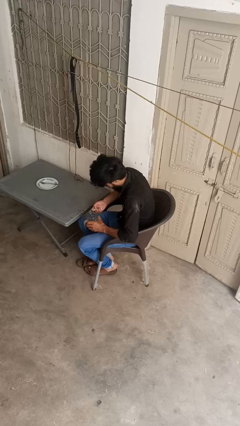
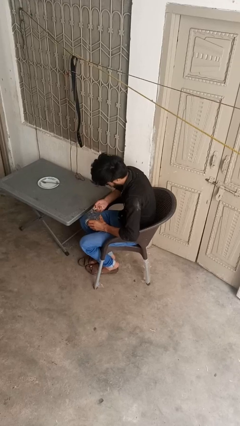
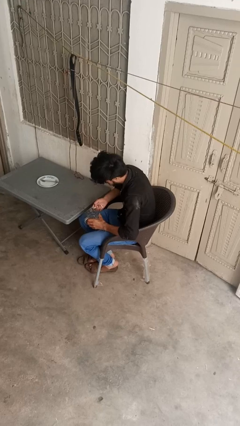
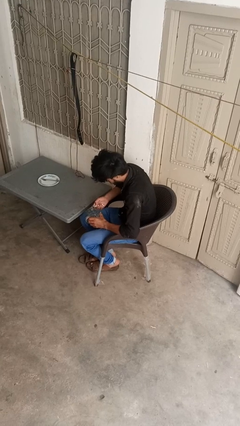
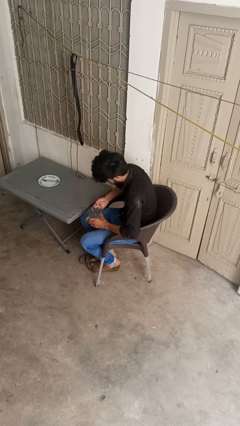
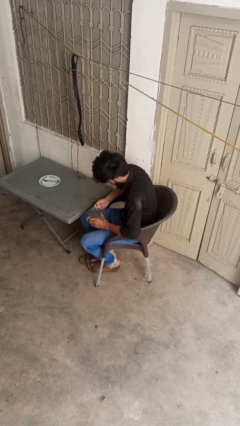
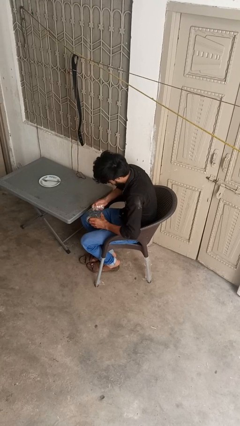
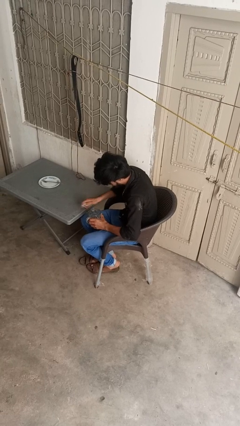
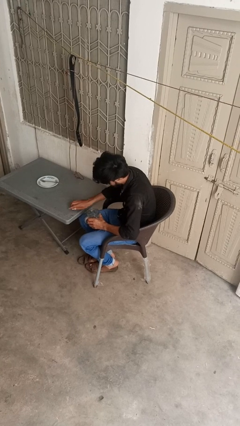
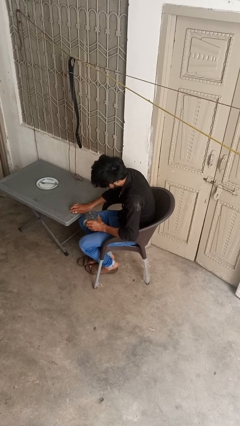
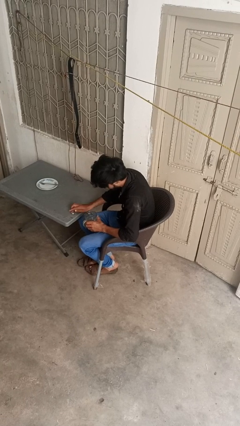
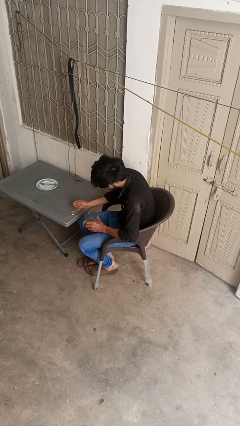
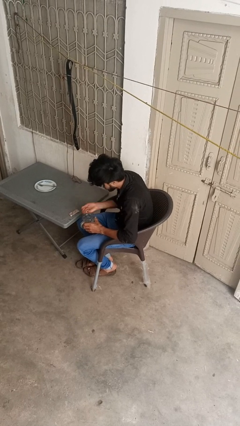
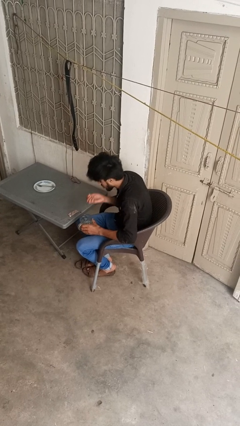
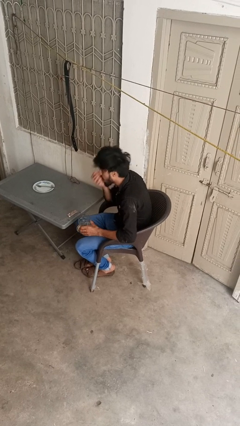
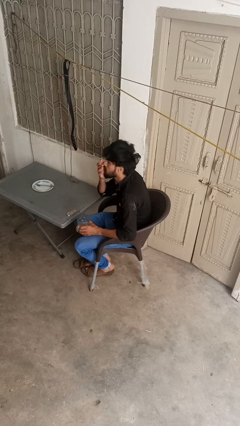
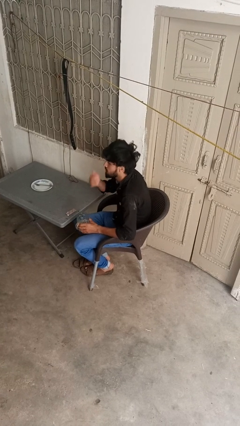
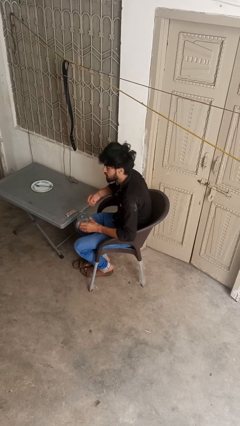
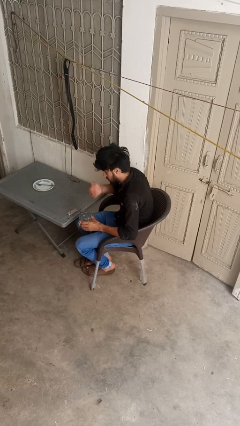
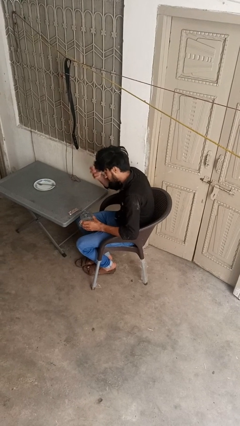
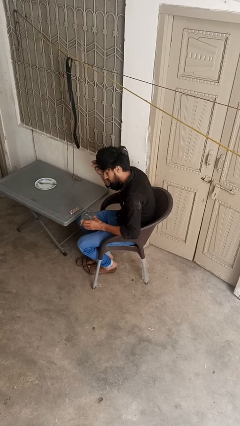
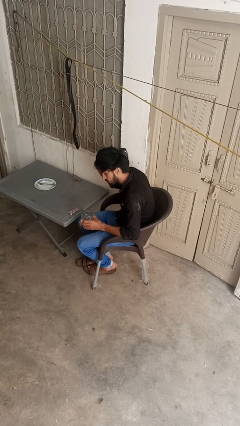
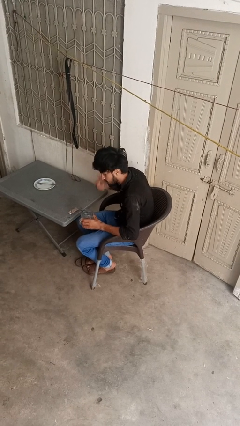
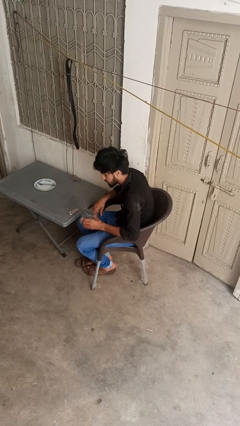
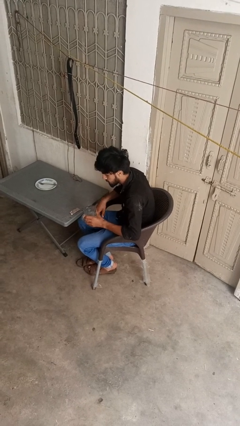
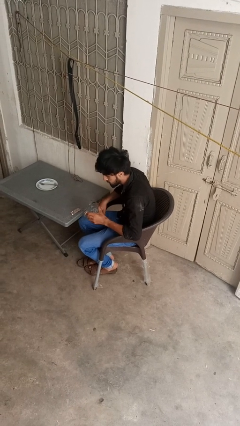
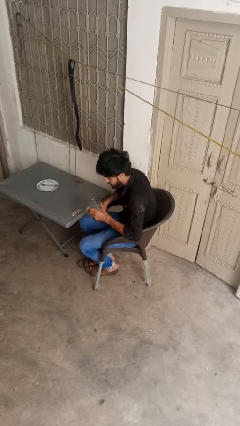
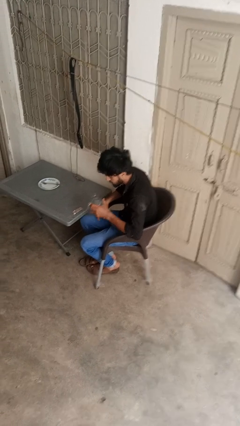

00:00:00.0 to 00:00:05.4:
person takes medicine pills

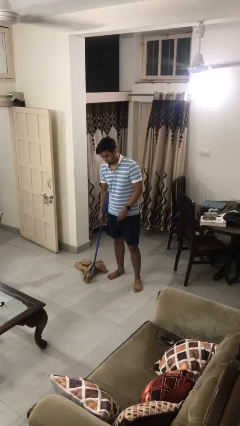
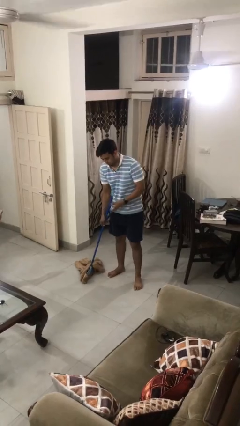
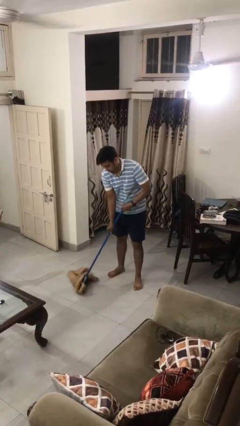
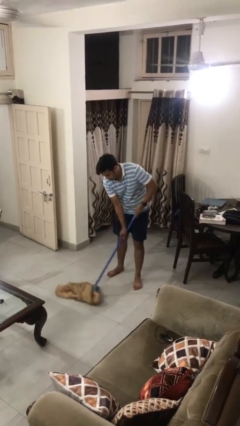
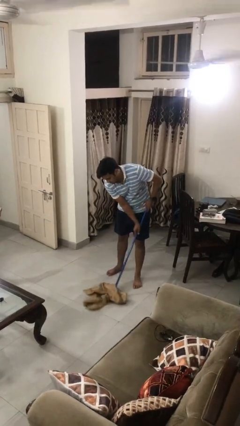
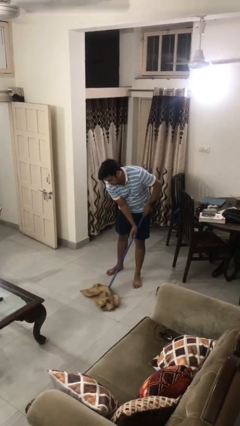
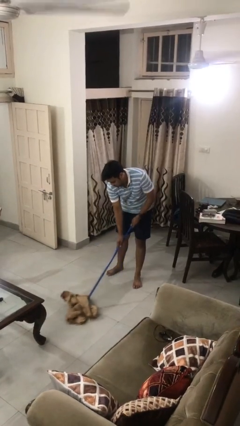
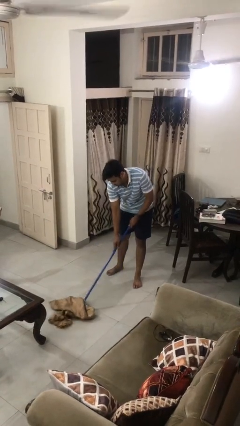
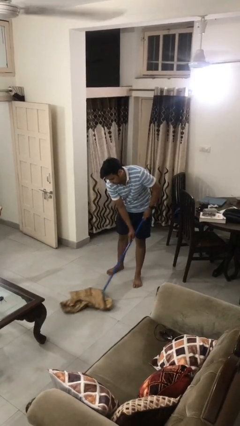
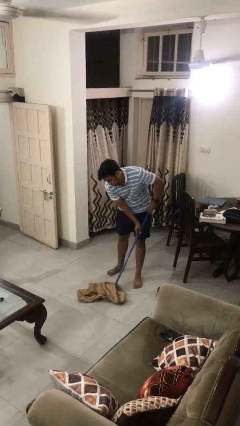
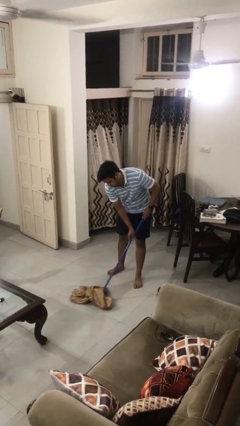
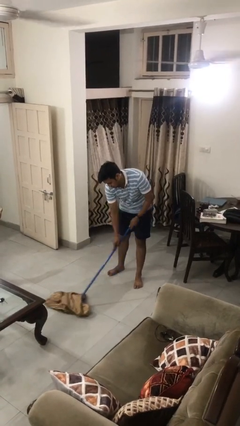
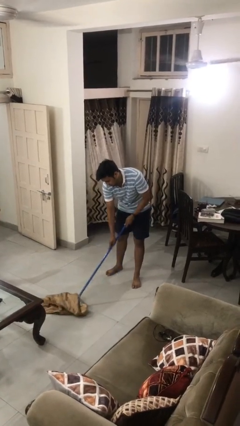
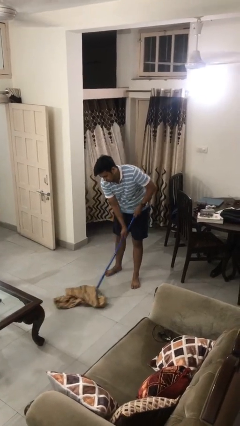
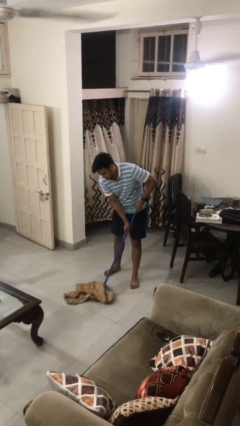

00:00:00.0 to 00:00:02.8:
person mops

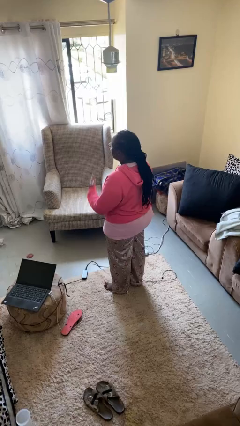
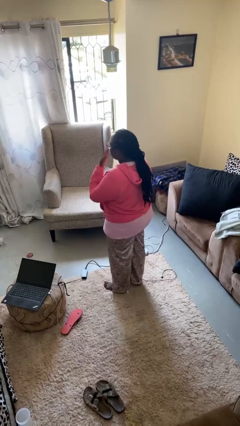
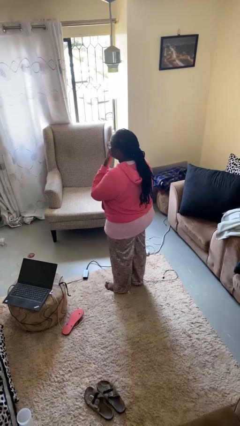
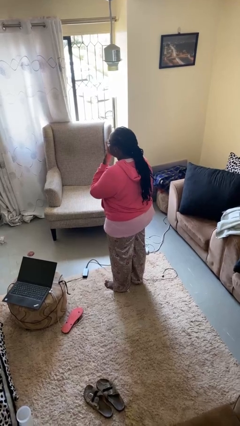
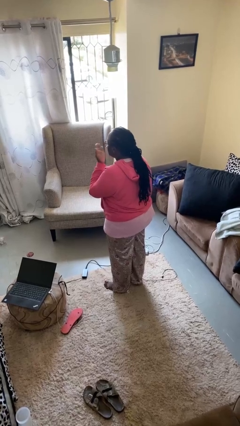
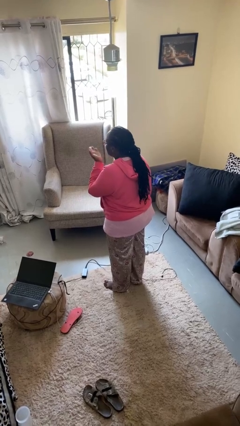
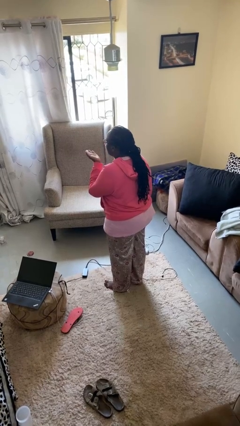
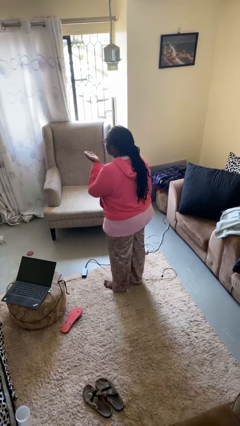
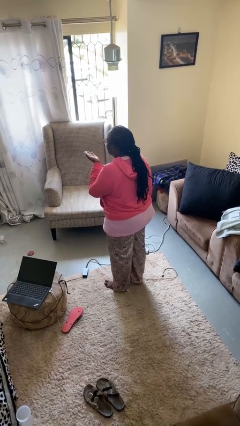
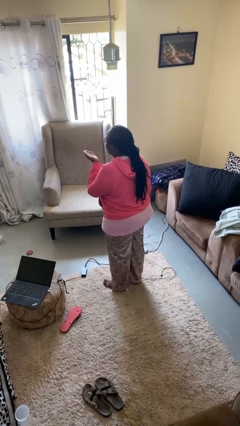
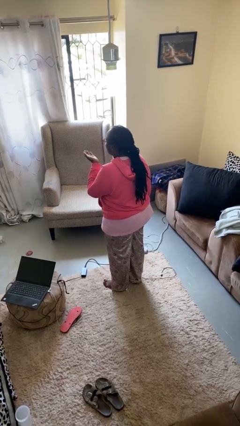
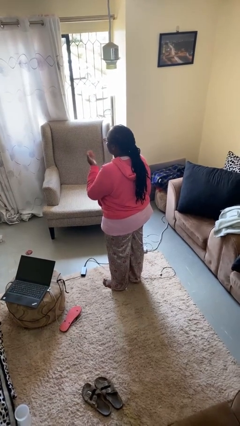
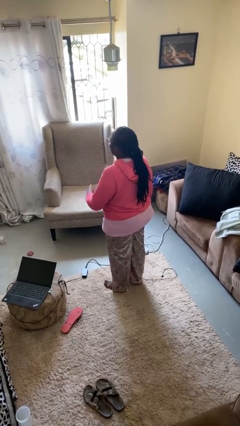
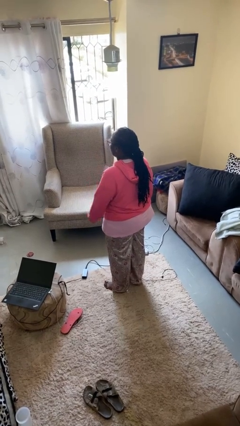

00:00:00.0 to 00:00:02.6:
person gestures blow kiss

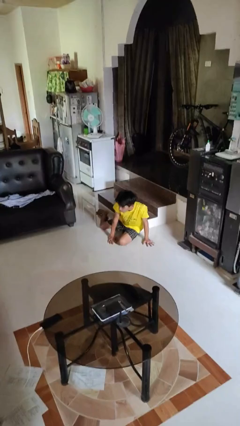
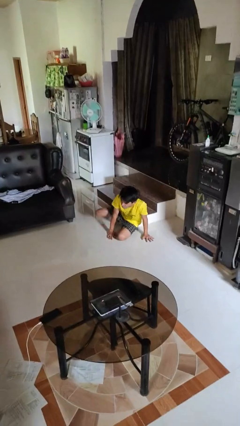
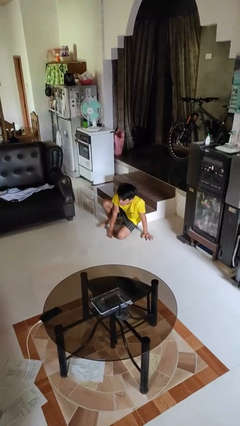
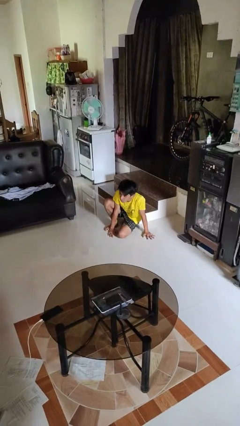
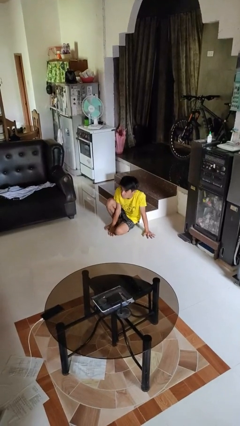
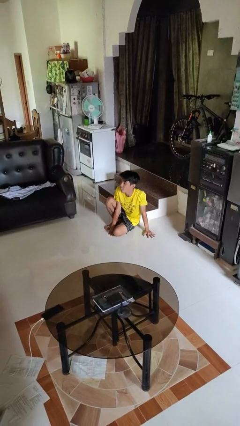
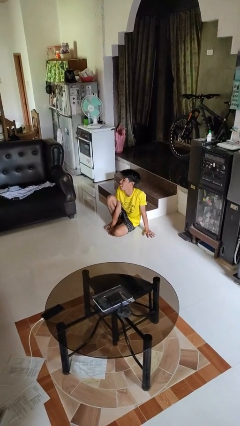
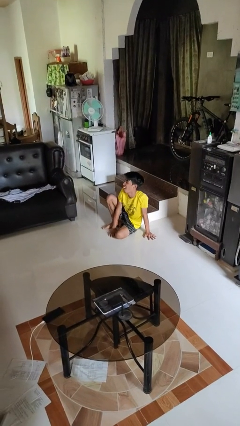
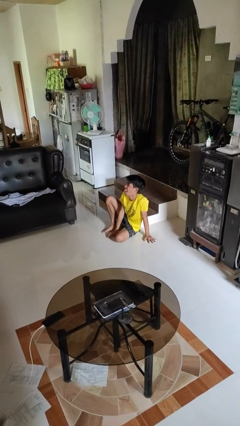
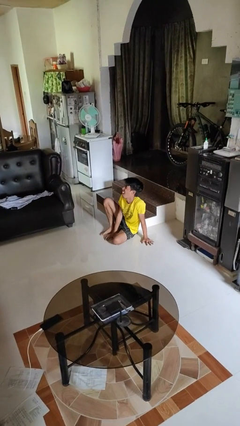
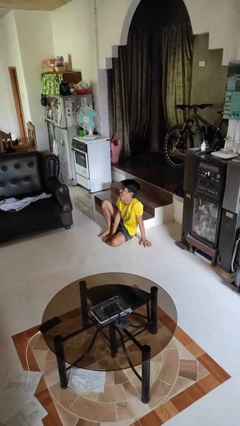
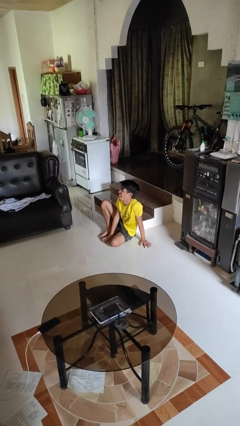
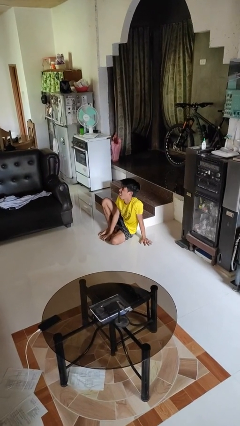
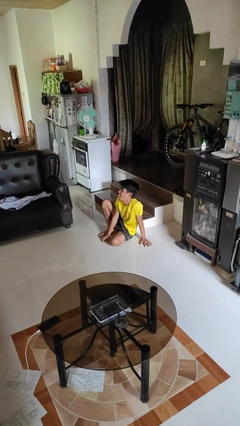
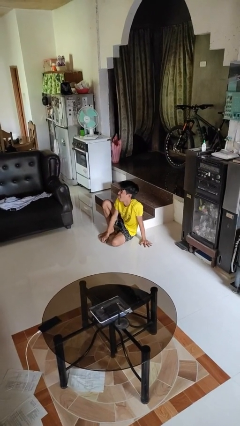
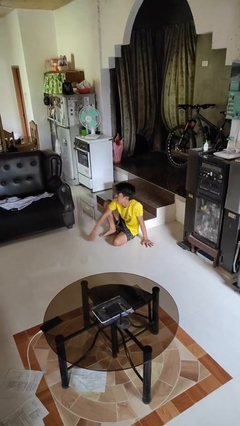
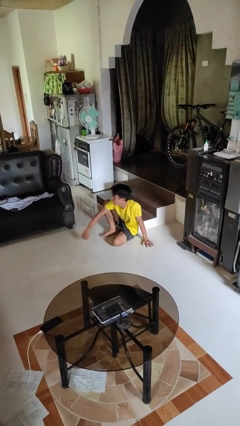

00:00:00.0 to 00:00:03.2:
person lies down on floor

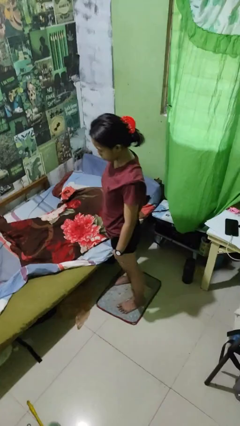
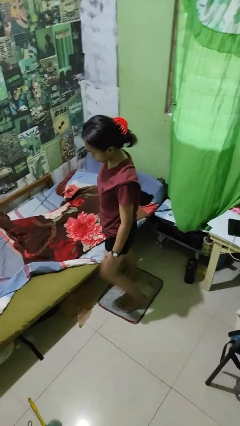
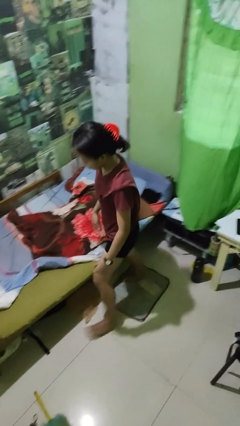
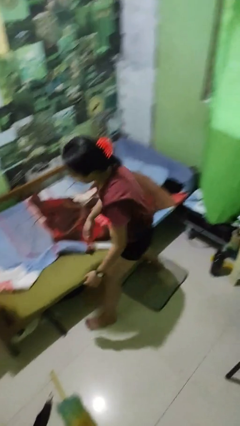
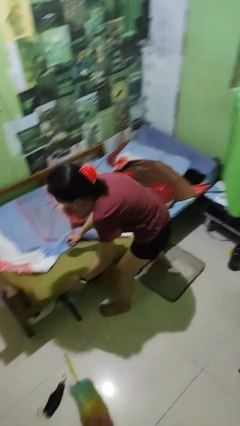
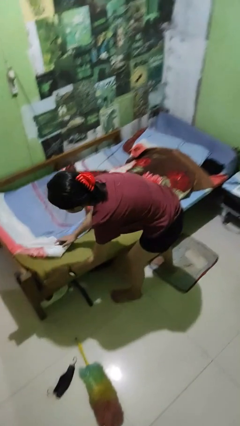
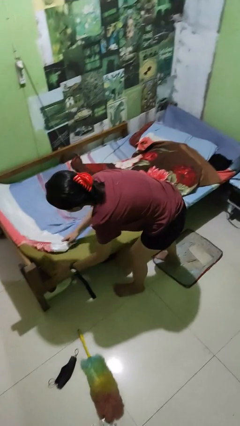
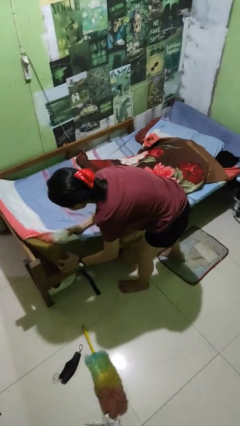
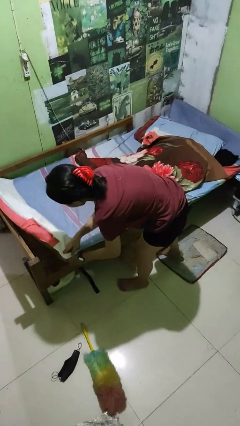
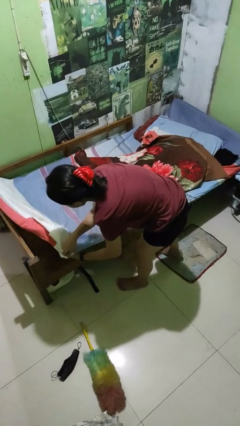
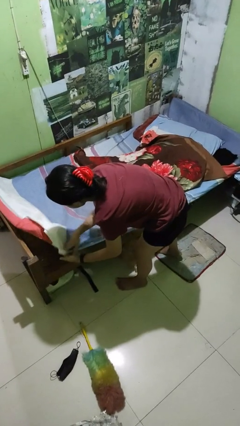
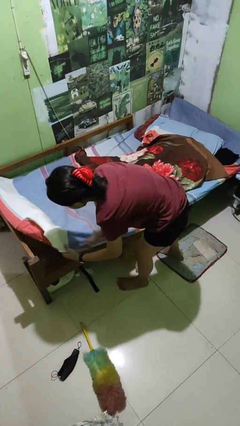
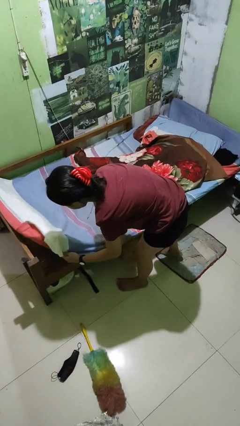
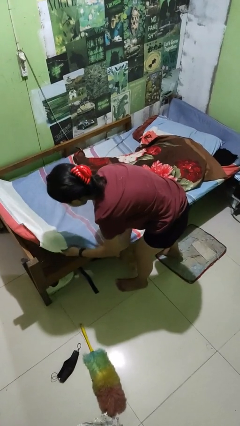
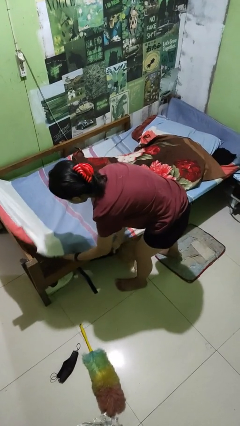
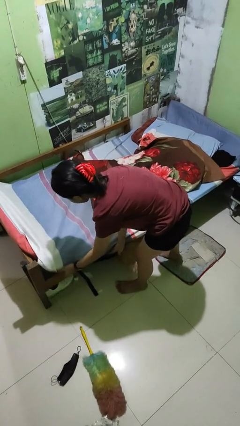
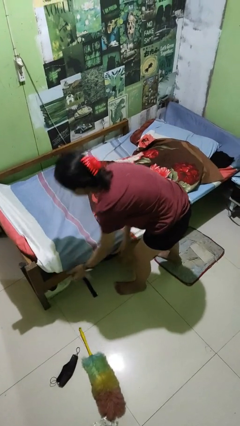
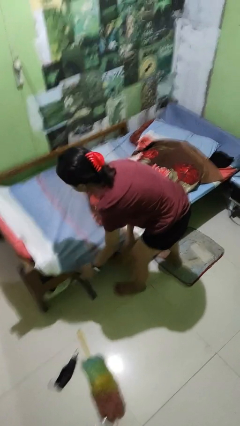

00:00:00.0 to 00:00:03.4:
person makes bed

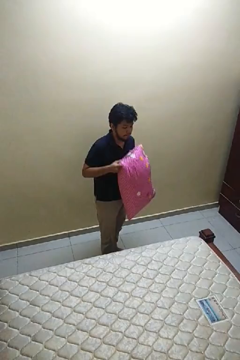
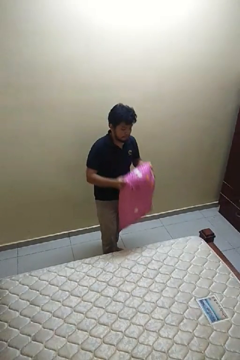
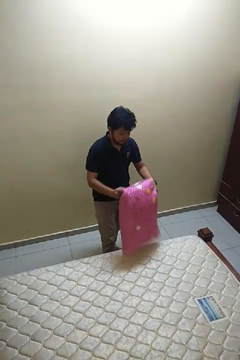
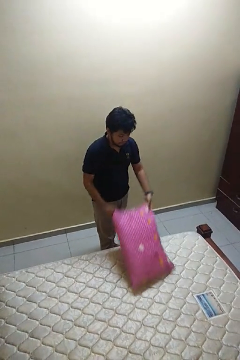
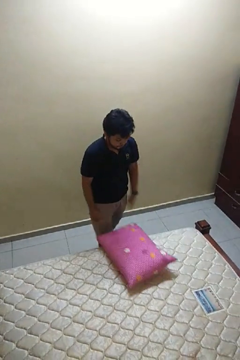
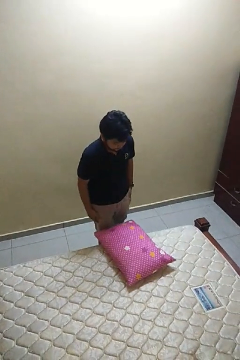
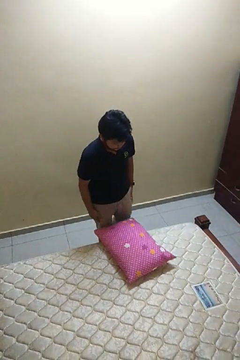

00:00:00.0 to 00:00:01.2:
person puts down object on bed
